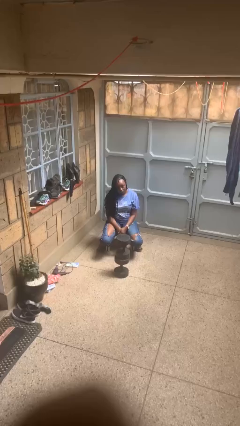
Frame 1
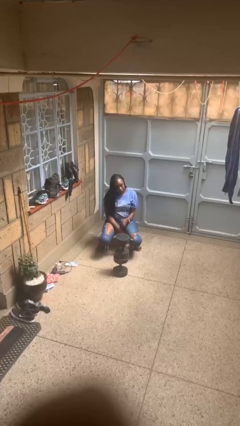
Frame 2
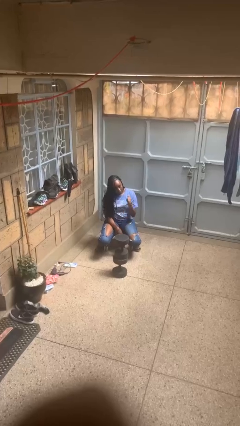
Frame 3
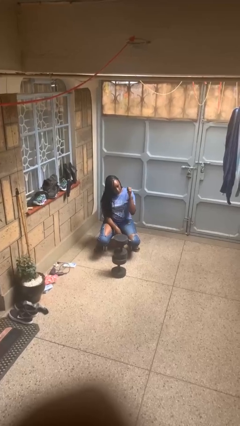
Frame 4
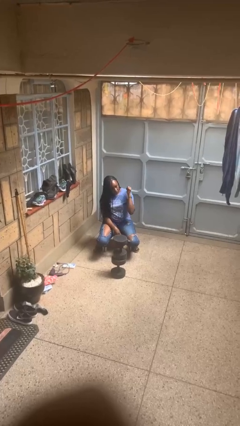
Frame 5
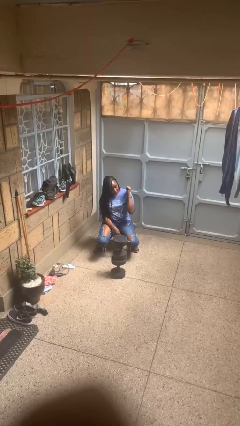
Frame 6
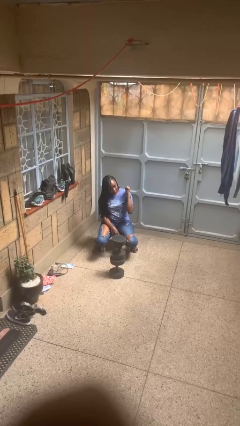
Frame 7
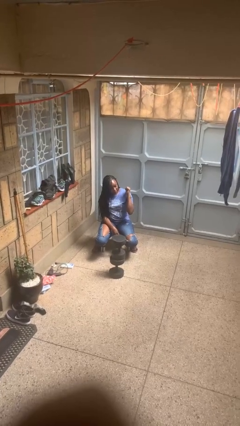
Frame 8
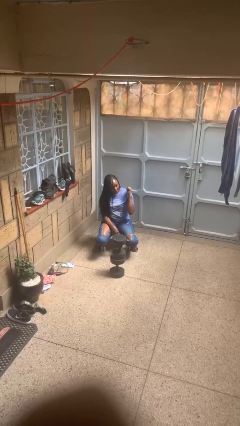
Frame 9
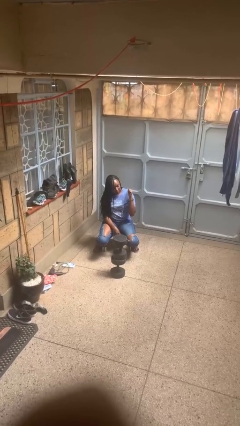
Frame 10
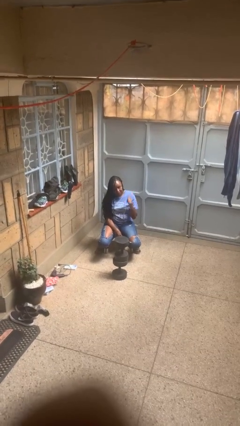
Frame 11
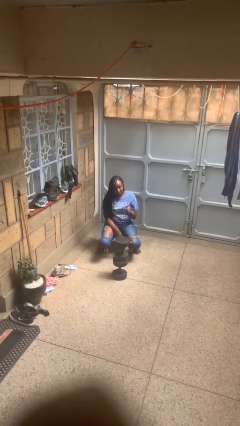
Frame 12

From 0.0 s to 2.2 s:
person gestures behind me

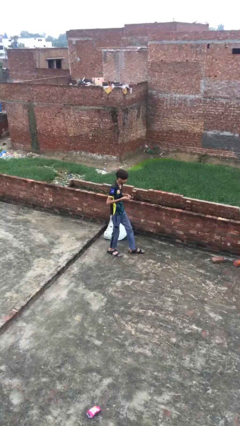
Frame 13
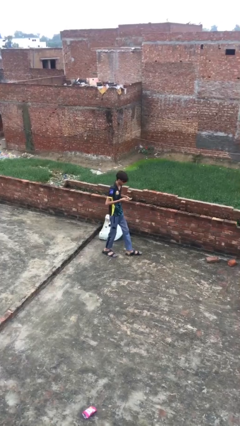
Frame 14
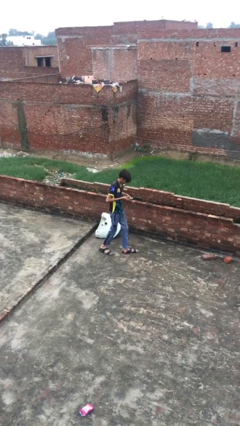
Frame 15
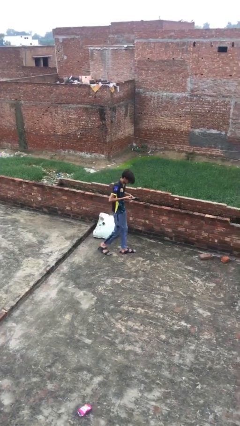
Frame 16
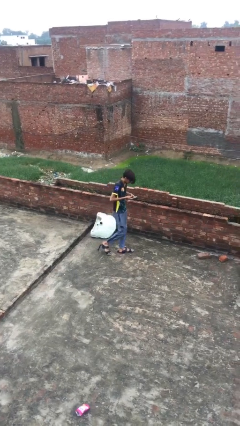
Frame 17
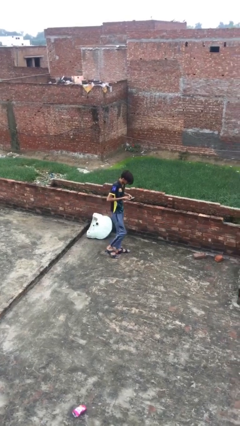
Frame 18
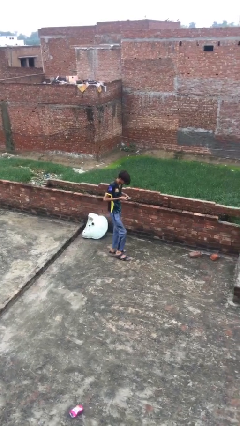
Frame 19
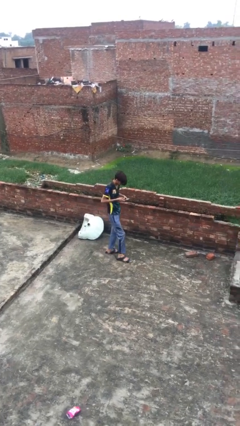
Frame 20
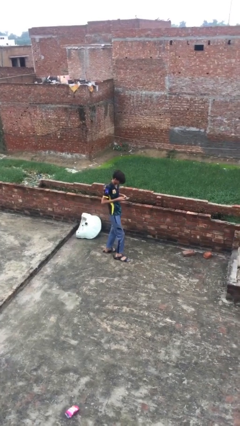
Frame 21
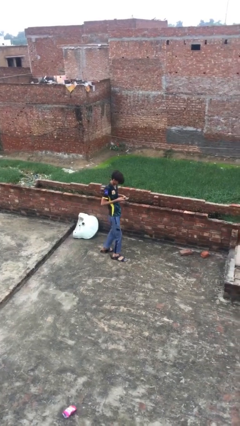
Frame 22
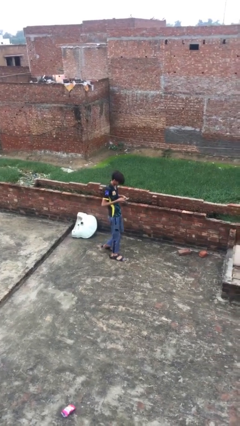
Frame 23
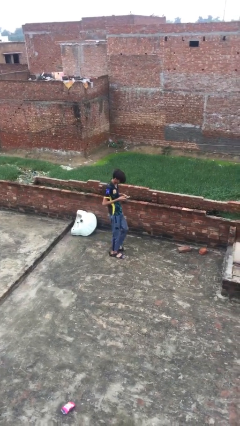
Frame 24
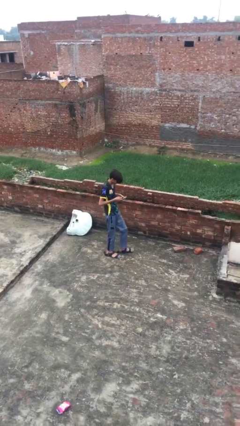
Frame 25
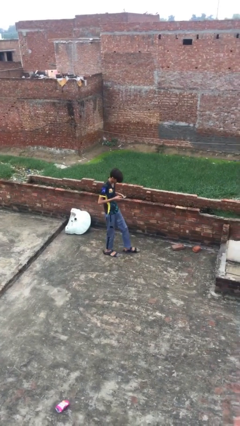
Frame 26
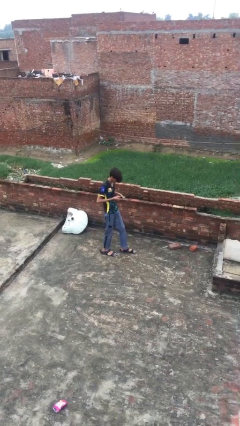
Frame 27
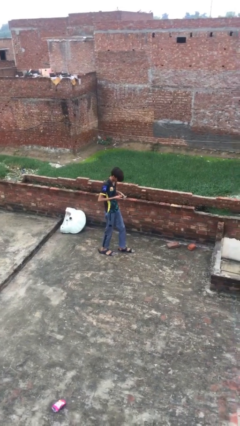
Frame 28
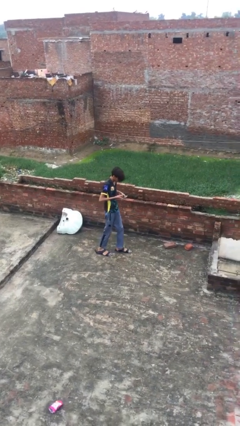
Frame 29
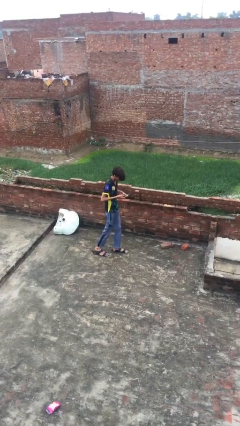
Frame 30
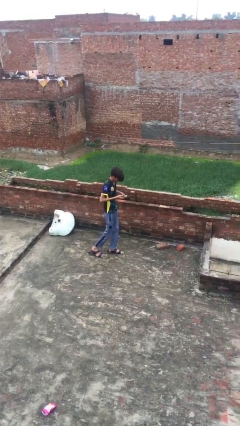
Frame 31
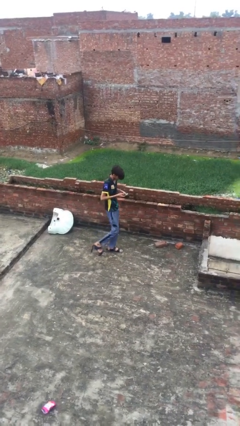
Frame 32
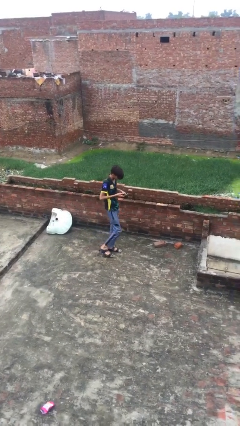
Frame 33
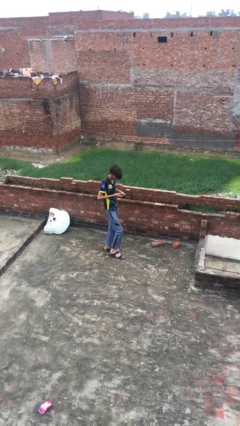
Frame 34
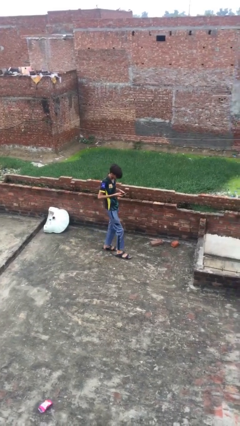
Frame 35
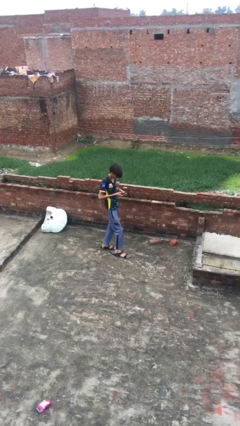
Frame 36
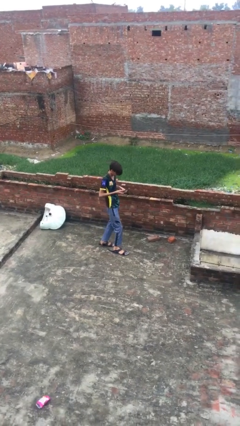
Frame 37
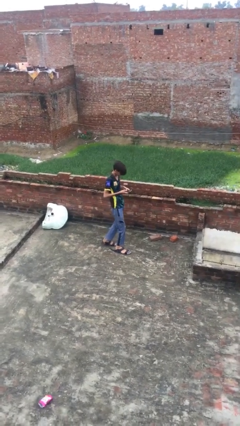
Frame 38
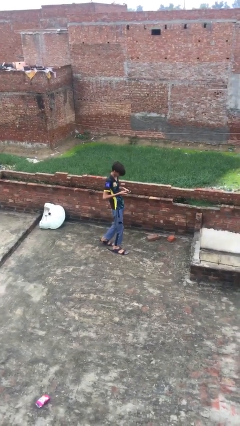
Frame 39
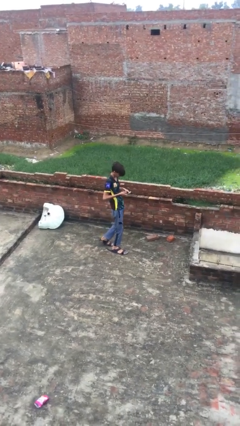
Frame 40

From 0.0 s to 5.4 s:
person texts on phone

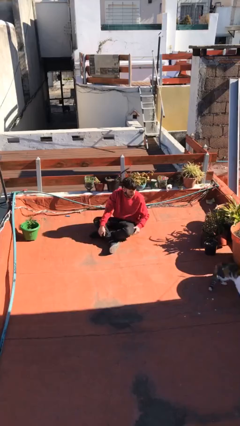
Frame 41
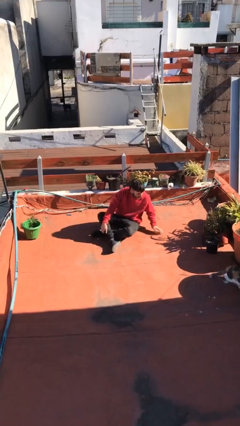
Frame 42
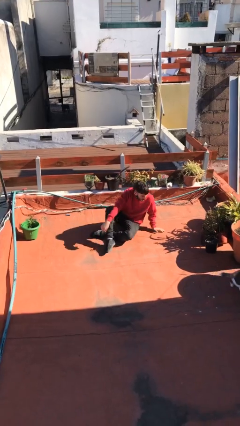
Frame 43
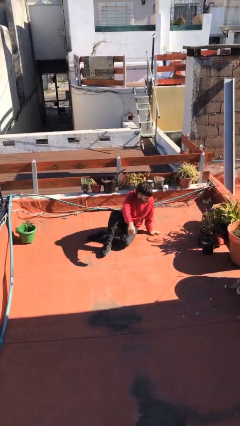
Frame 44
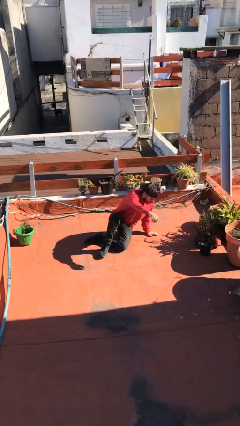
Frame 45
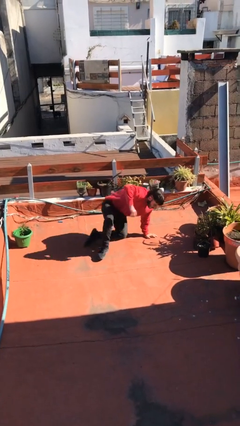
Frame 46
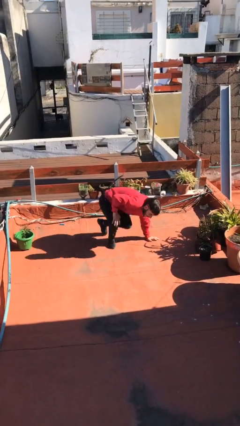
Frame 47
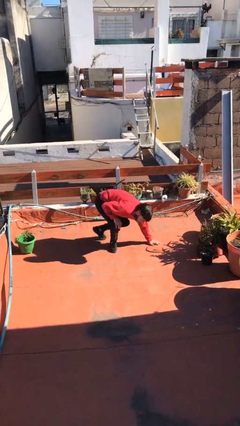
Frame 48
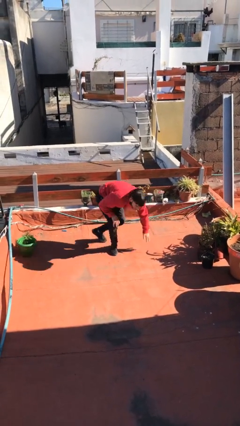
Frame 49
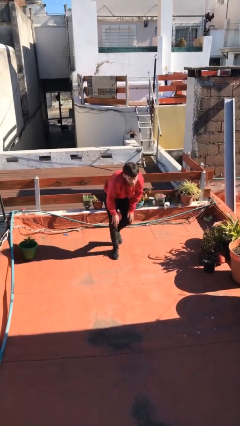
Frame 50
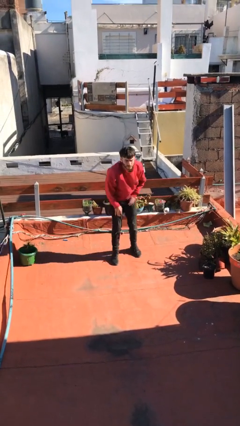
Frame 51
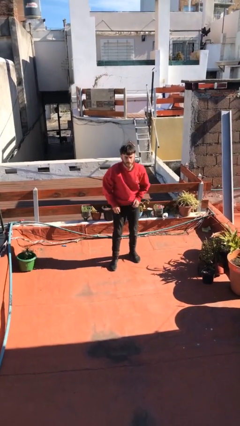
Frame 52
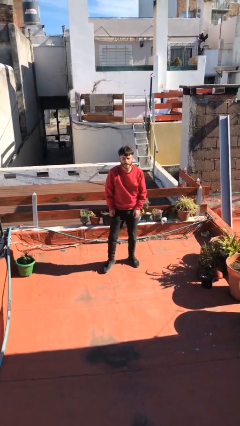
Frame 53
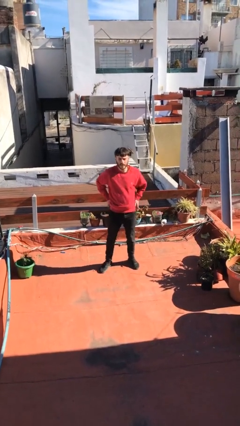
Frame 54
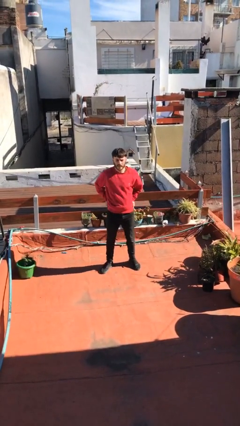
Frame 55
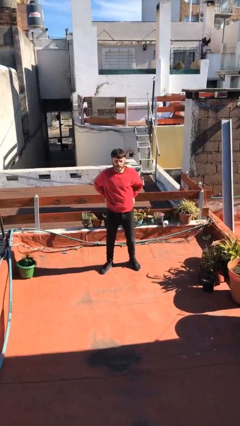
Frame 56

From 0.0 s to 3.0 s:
person stands up from floor

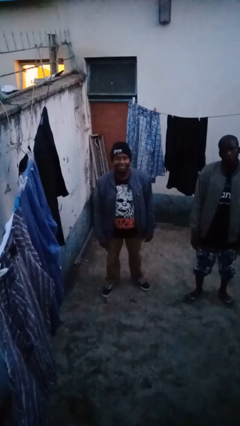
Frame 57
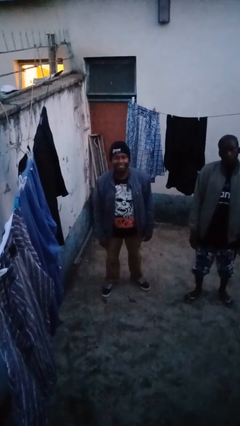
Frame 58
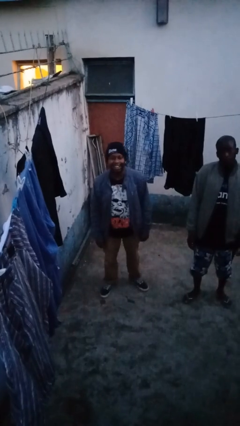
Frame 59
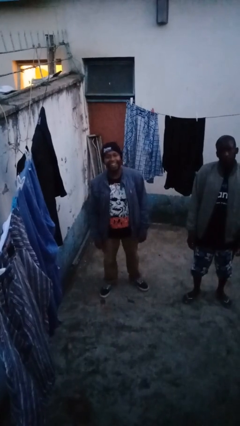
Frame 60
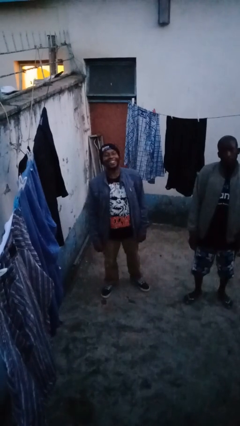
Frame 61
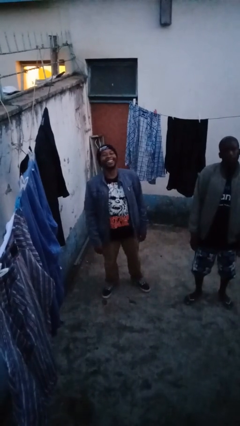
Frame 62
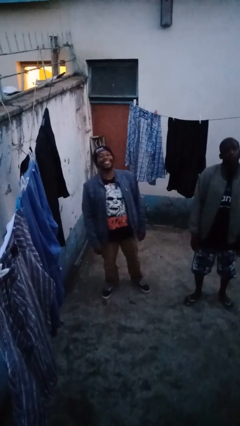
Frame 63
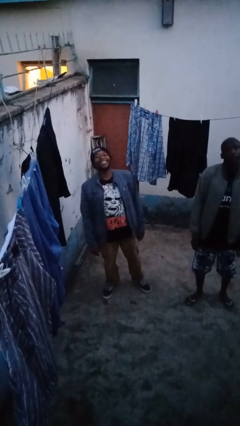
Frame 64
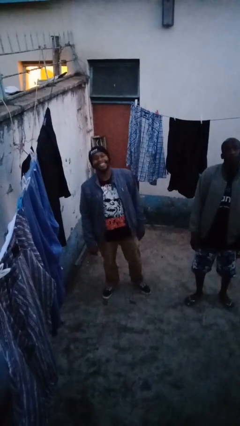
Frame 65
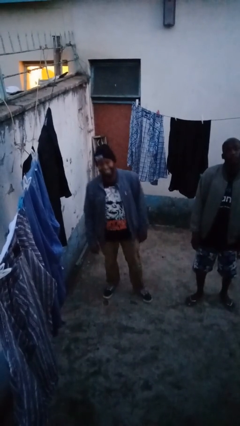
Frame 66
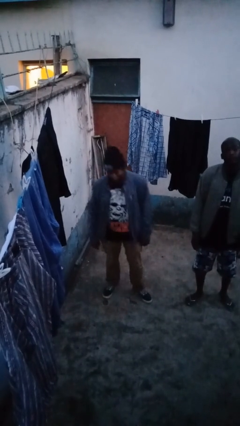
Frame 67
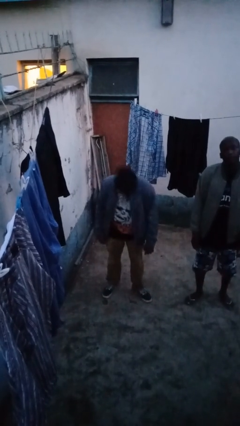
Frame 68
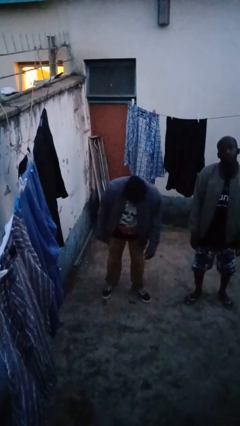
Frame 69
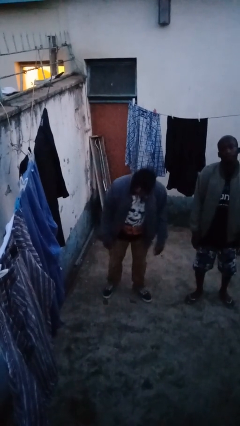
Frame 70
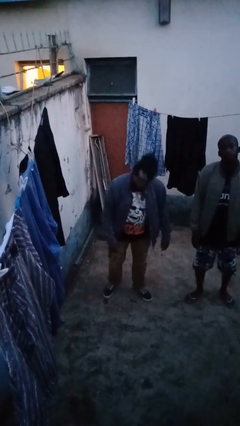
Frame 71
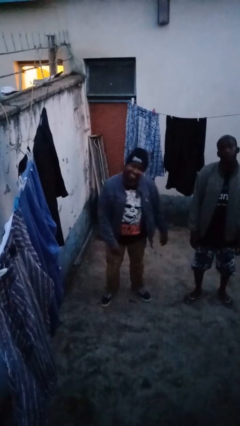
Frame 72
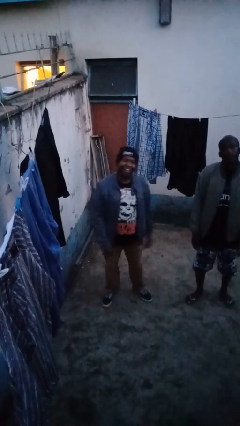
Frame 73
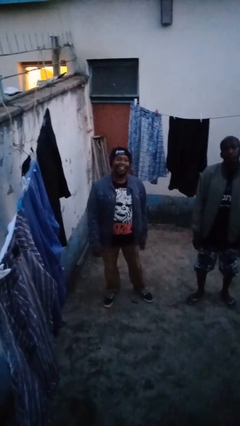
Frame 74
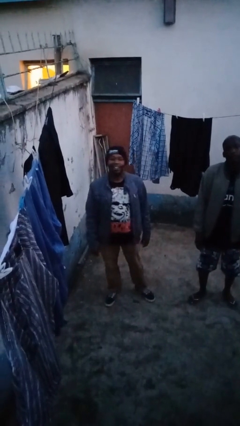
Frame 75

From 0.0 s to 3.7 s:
person laughs with person

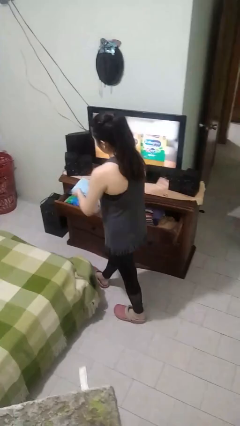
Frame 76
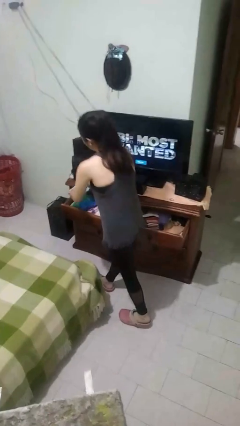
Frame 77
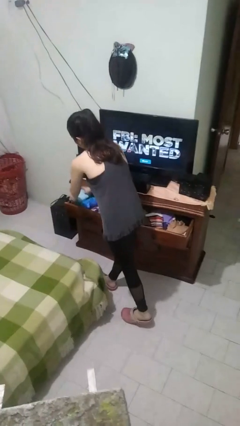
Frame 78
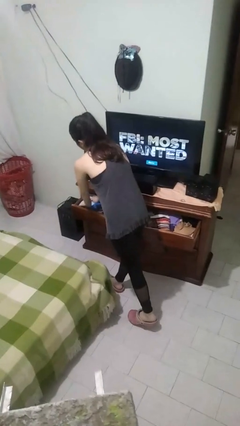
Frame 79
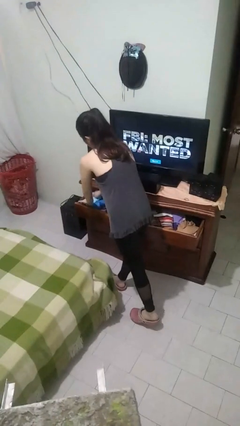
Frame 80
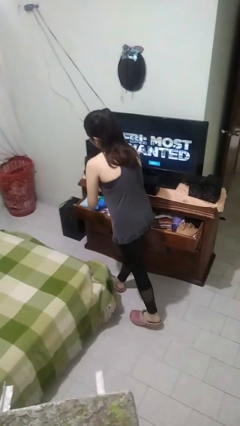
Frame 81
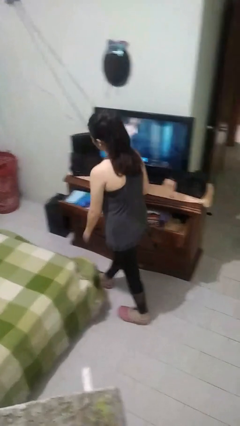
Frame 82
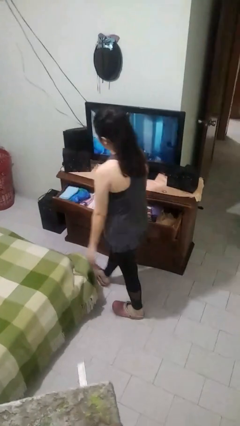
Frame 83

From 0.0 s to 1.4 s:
person puts clothes into dresser

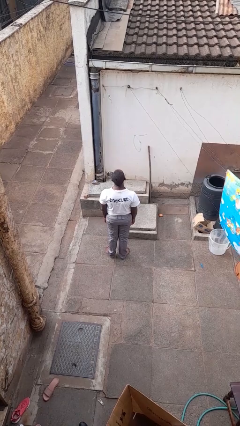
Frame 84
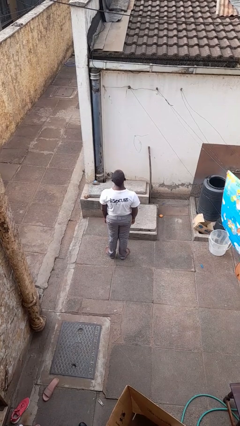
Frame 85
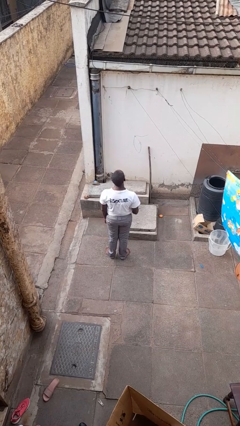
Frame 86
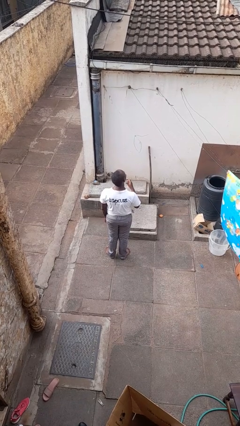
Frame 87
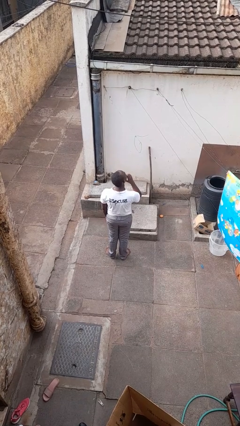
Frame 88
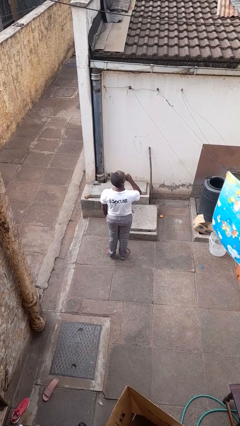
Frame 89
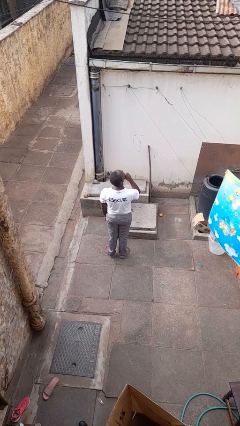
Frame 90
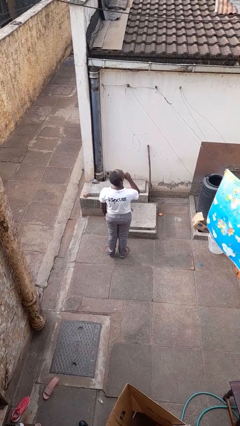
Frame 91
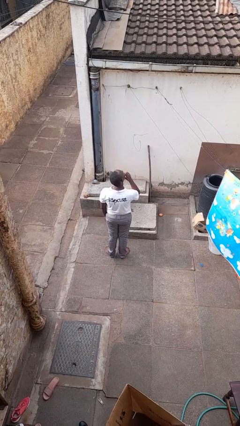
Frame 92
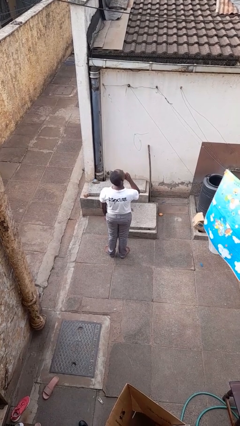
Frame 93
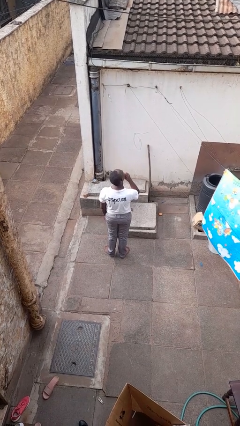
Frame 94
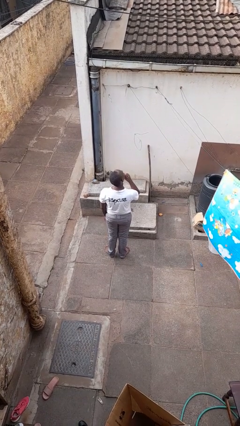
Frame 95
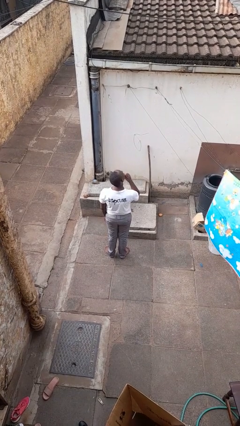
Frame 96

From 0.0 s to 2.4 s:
person strokes chin
